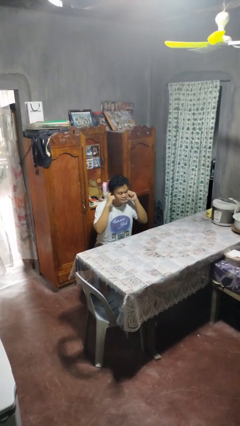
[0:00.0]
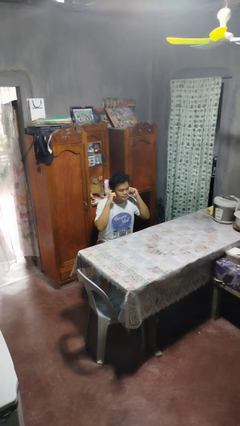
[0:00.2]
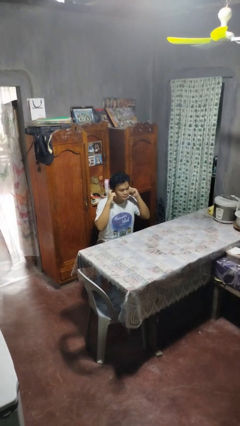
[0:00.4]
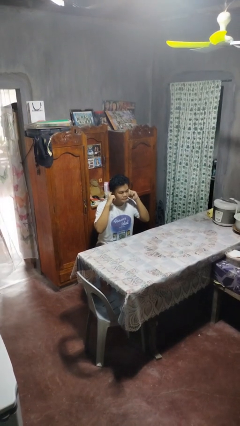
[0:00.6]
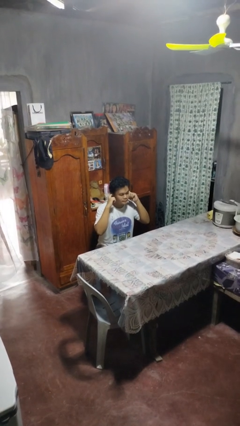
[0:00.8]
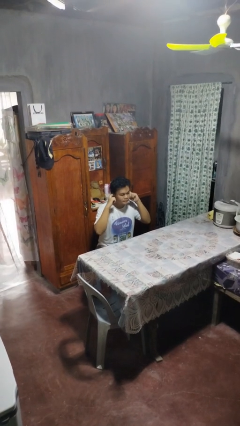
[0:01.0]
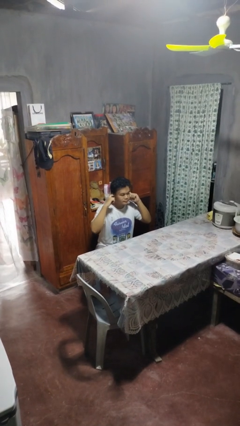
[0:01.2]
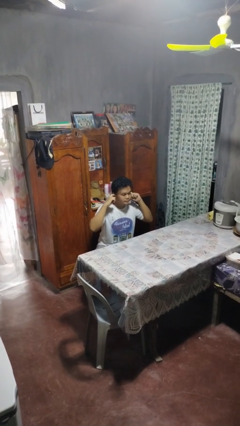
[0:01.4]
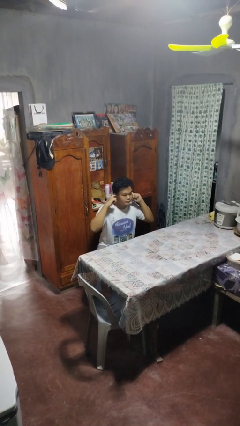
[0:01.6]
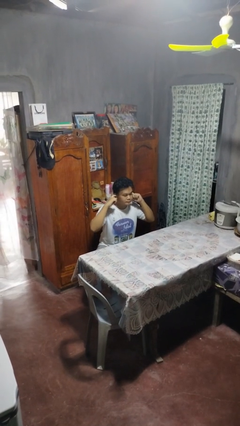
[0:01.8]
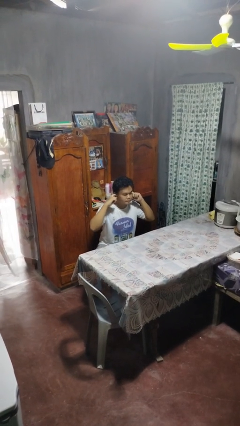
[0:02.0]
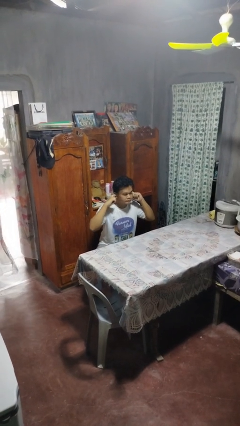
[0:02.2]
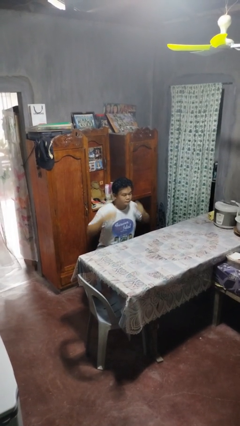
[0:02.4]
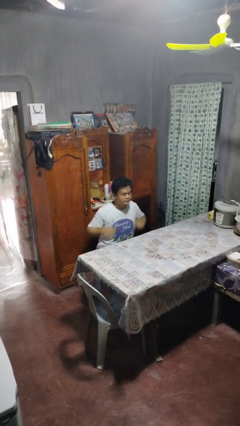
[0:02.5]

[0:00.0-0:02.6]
person puts fingers in ear

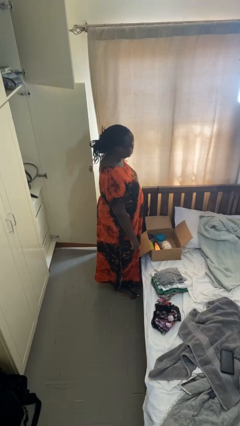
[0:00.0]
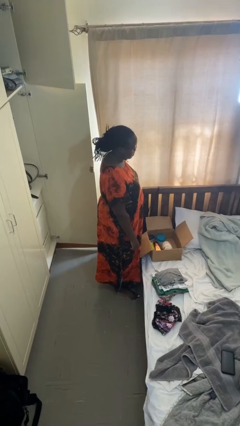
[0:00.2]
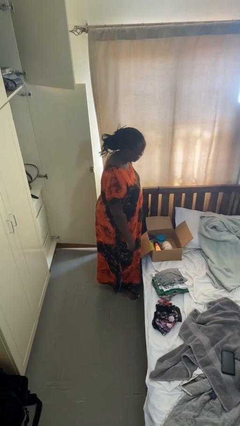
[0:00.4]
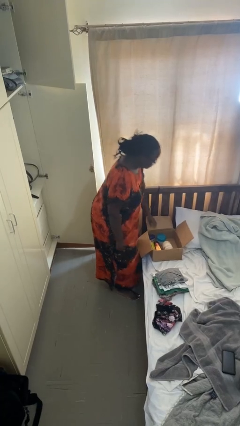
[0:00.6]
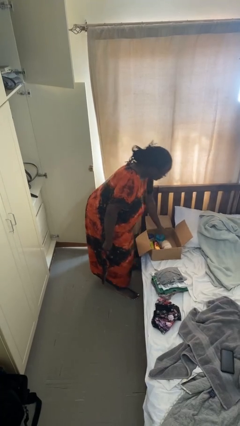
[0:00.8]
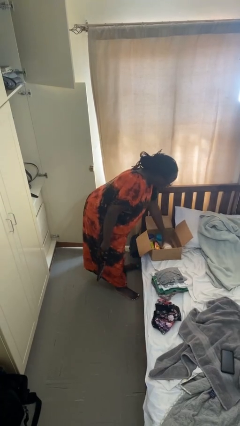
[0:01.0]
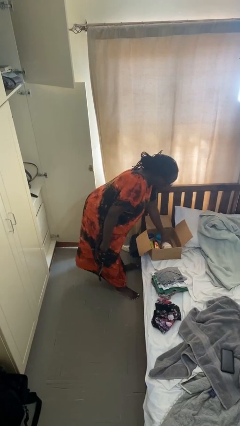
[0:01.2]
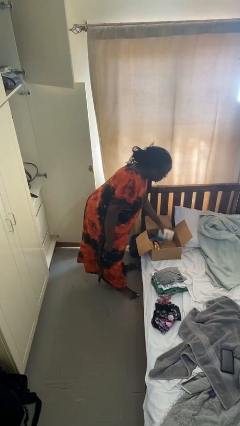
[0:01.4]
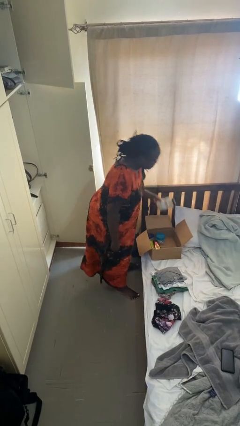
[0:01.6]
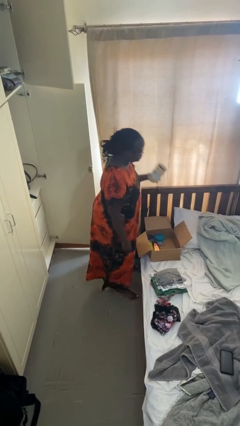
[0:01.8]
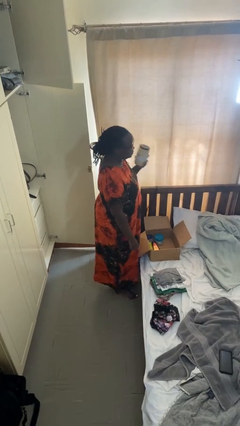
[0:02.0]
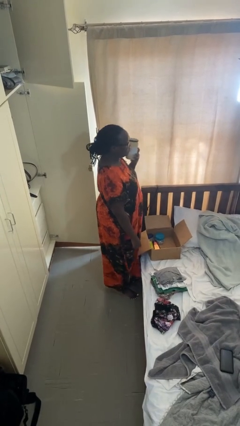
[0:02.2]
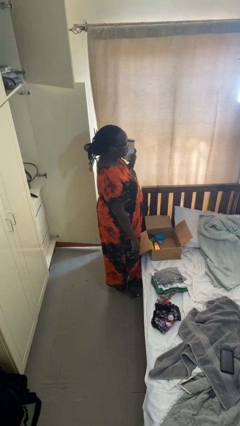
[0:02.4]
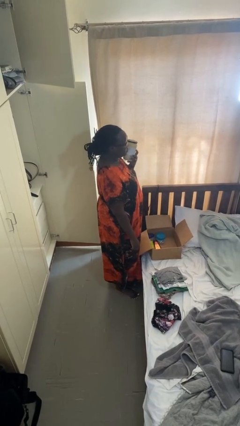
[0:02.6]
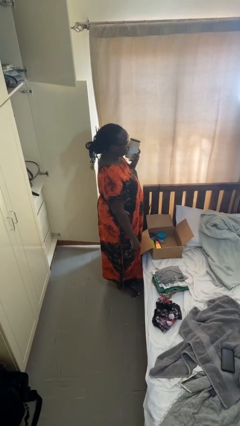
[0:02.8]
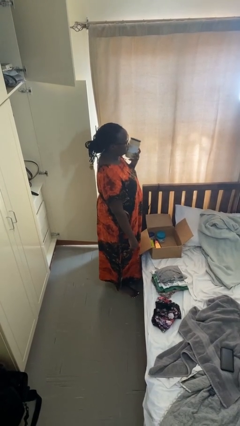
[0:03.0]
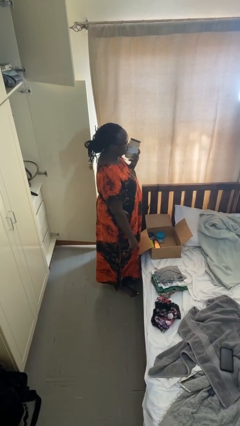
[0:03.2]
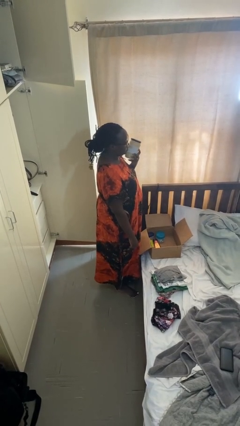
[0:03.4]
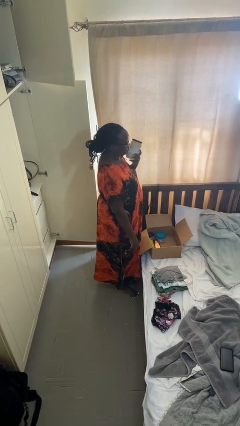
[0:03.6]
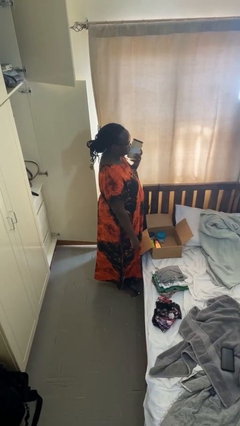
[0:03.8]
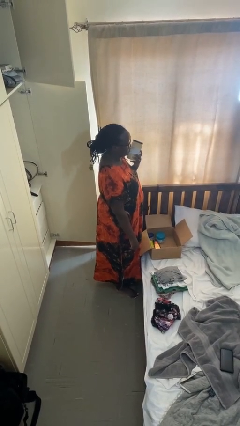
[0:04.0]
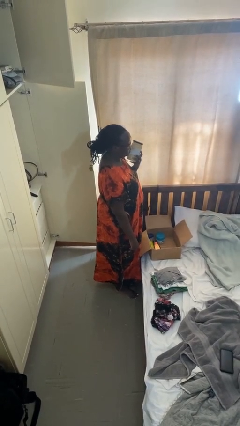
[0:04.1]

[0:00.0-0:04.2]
person takes object from box

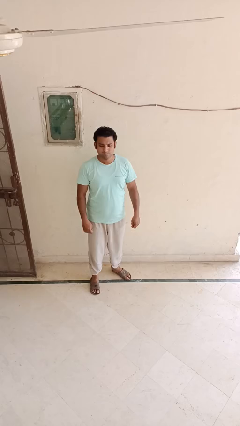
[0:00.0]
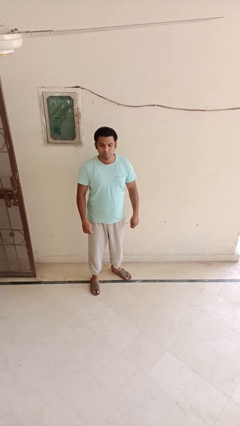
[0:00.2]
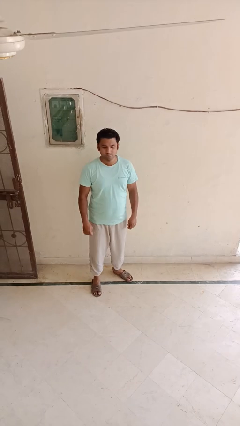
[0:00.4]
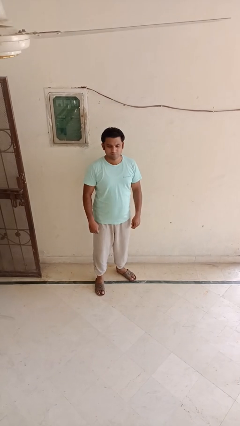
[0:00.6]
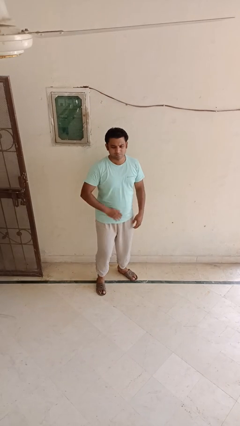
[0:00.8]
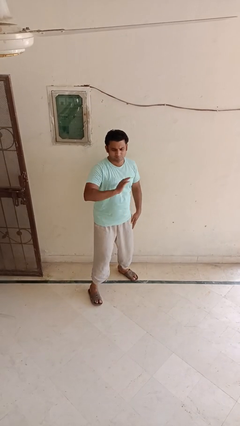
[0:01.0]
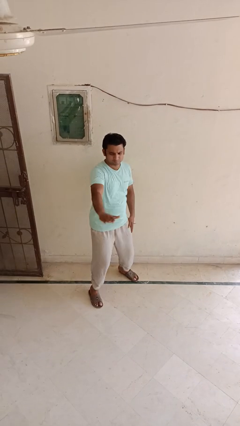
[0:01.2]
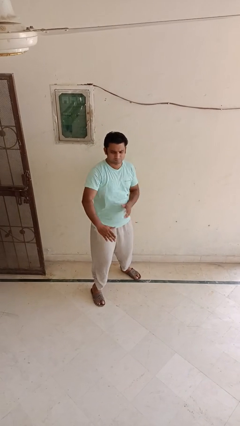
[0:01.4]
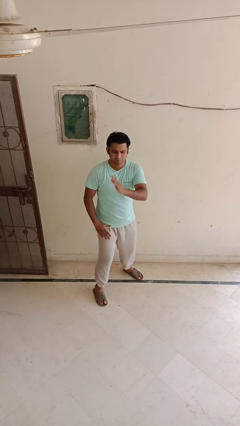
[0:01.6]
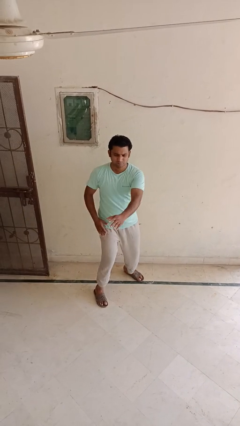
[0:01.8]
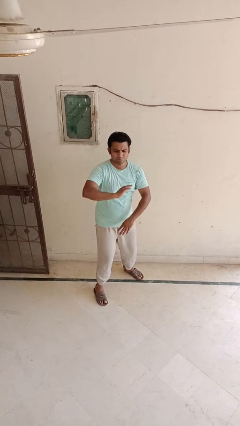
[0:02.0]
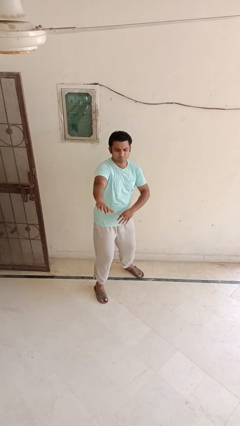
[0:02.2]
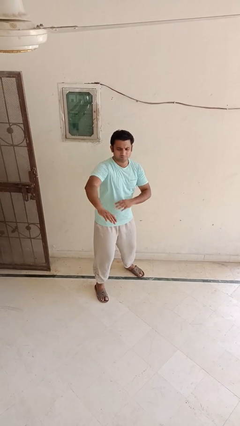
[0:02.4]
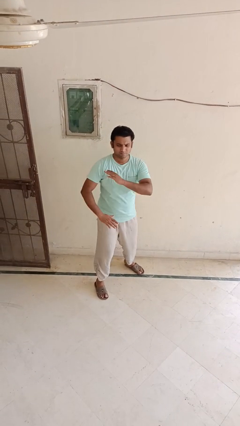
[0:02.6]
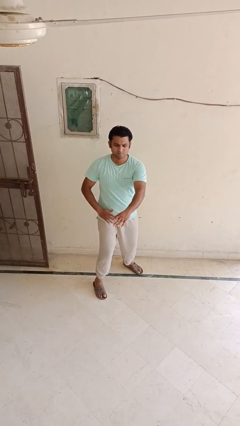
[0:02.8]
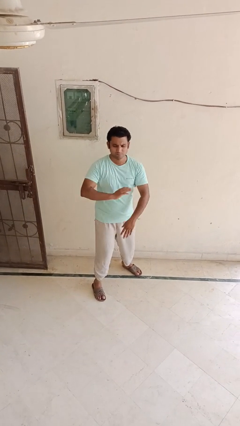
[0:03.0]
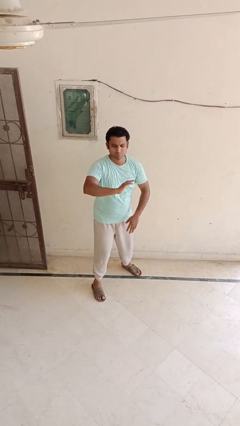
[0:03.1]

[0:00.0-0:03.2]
person karate chop

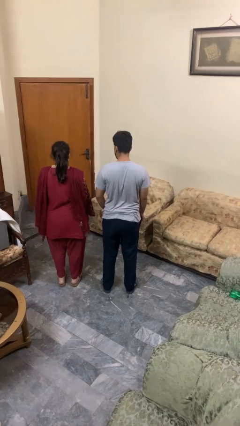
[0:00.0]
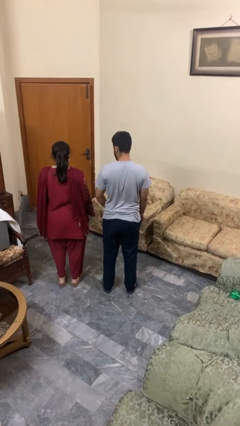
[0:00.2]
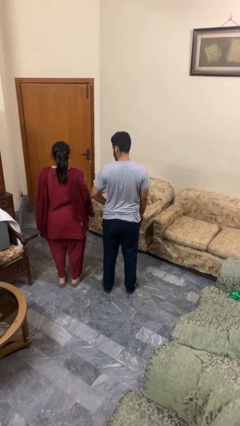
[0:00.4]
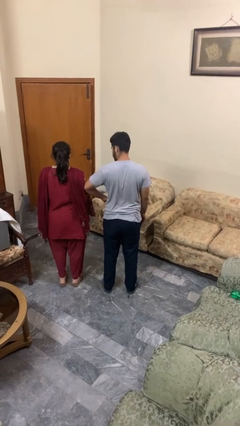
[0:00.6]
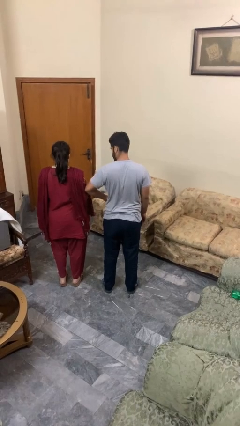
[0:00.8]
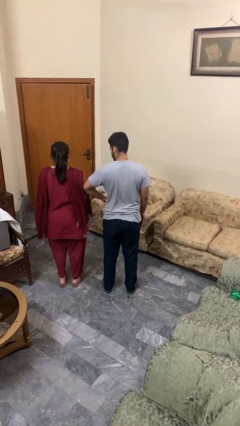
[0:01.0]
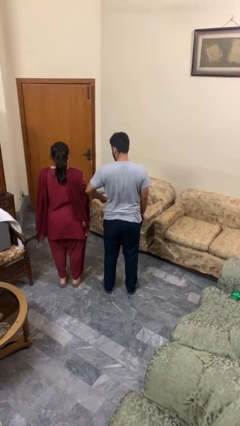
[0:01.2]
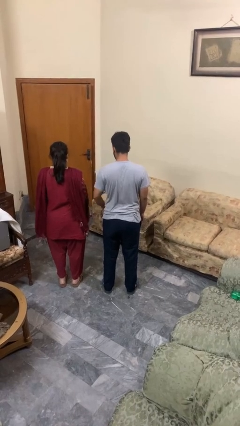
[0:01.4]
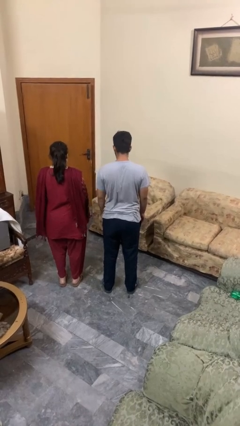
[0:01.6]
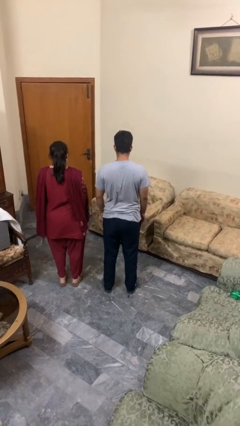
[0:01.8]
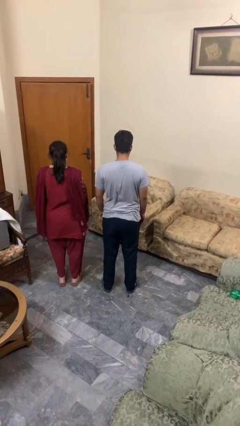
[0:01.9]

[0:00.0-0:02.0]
person nudges person with elbow

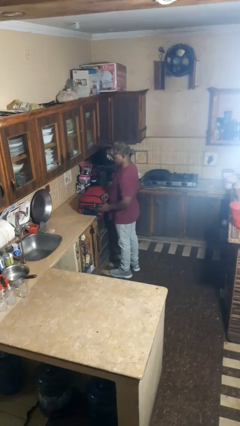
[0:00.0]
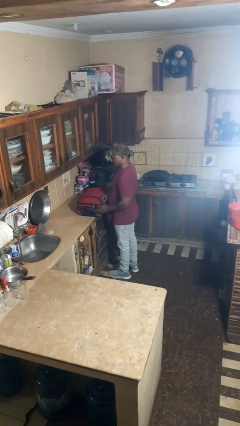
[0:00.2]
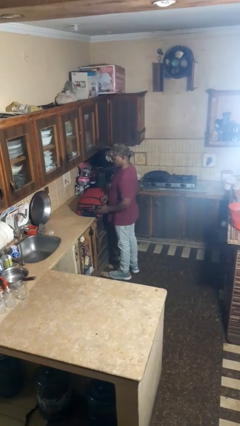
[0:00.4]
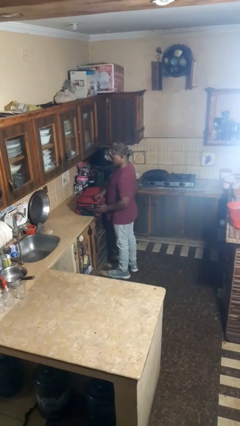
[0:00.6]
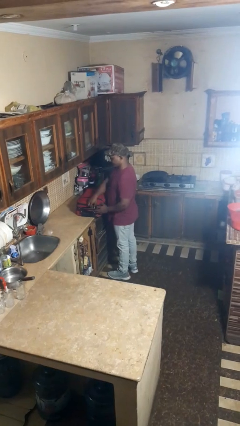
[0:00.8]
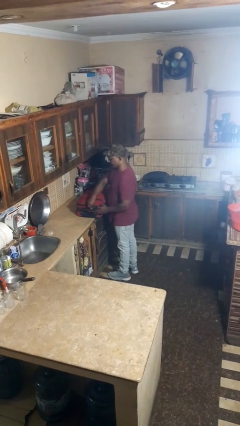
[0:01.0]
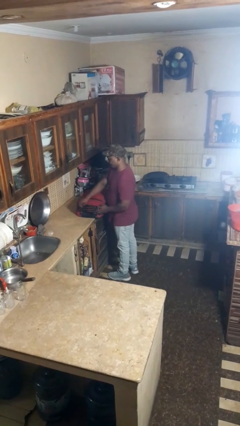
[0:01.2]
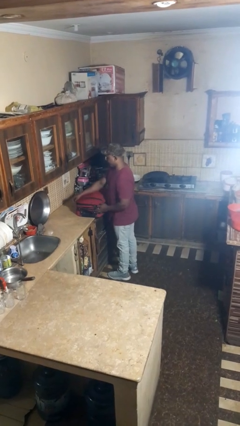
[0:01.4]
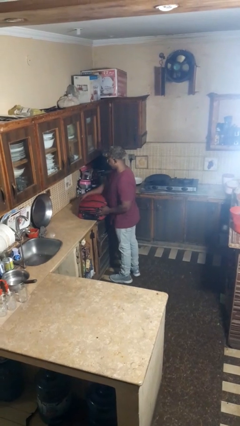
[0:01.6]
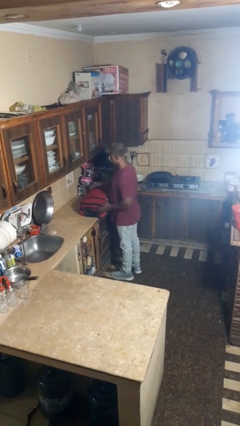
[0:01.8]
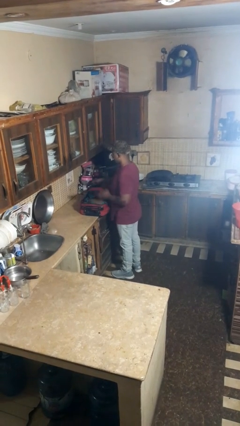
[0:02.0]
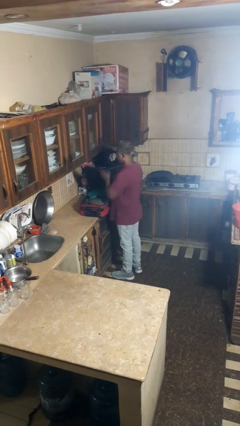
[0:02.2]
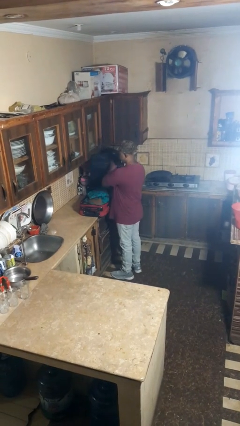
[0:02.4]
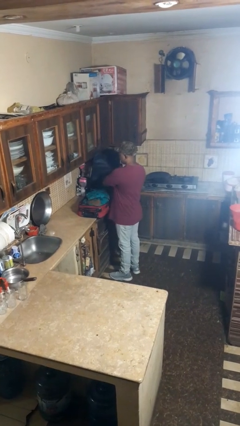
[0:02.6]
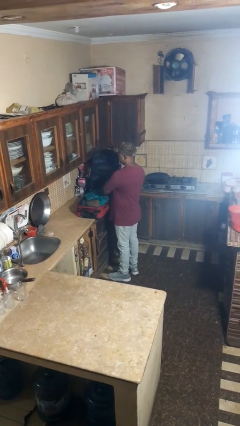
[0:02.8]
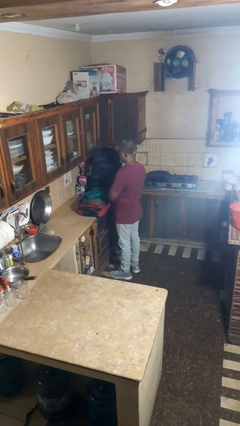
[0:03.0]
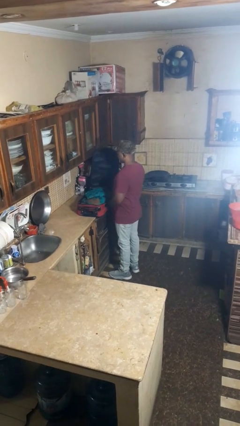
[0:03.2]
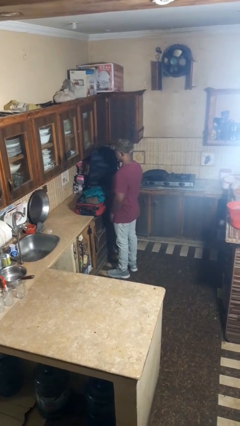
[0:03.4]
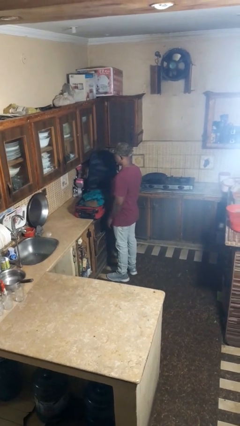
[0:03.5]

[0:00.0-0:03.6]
person opens suitcase

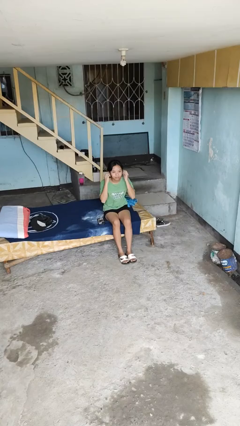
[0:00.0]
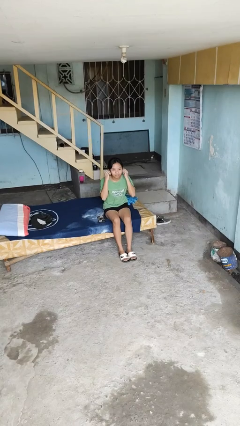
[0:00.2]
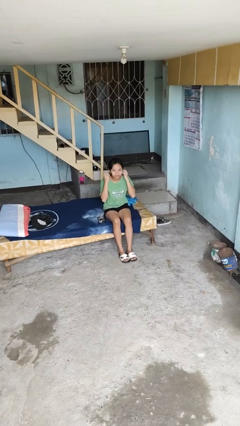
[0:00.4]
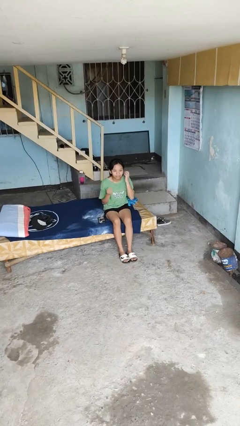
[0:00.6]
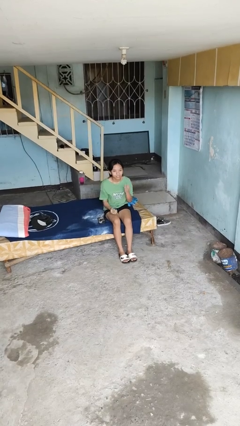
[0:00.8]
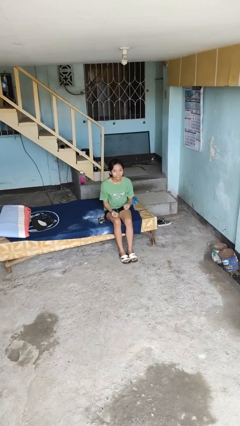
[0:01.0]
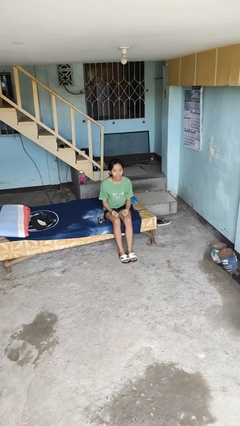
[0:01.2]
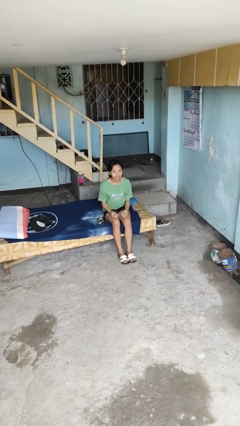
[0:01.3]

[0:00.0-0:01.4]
person takes off headphones

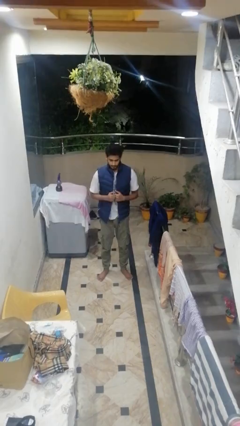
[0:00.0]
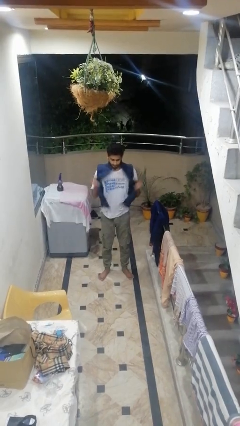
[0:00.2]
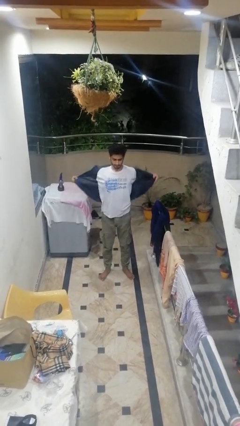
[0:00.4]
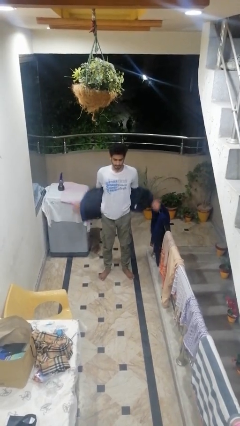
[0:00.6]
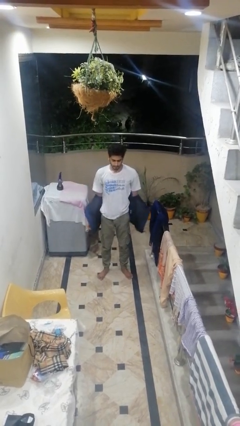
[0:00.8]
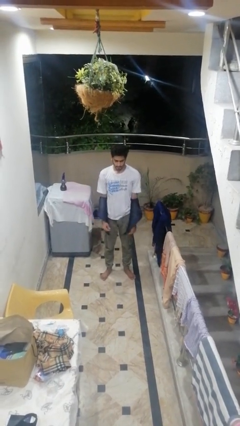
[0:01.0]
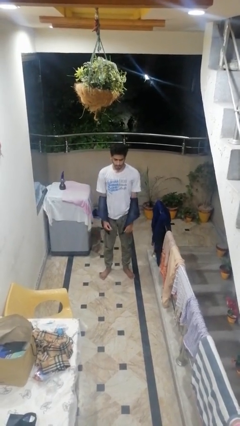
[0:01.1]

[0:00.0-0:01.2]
person takes off jacket
